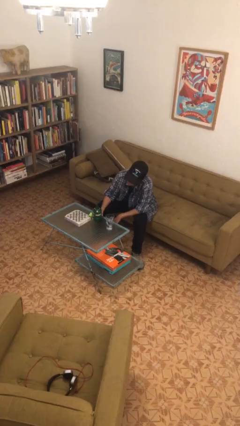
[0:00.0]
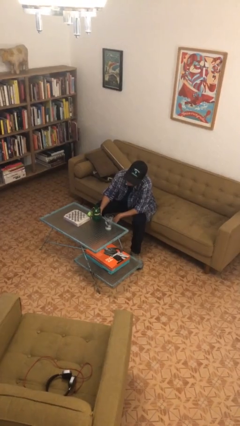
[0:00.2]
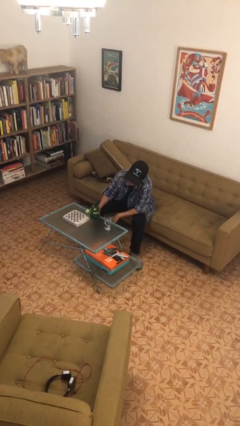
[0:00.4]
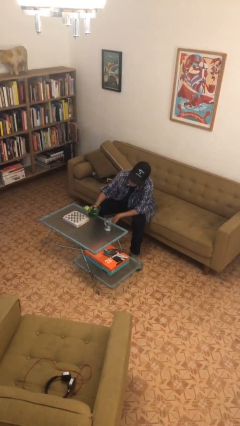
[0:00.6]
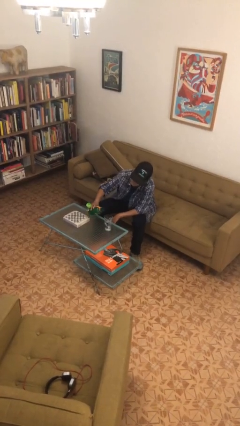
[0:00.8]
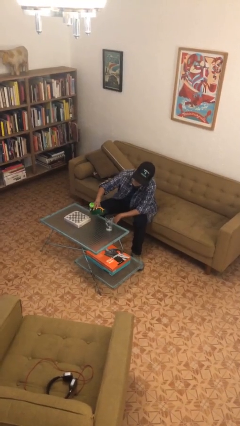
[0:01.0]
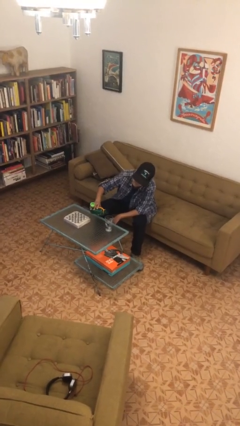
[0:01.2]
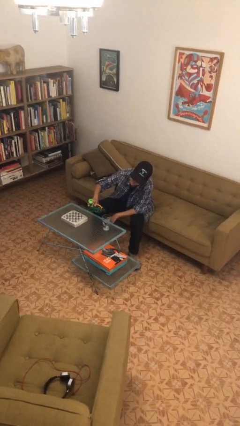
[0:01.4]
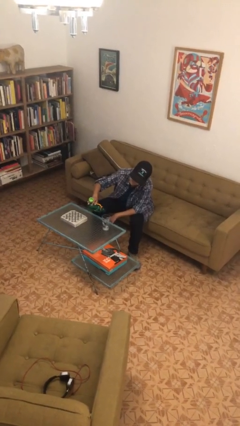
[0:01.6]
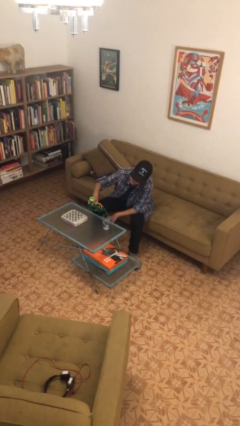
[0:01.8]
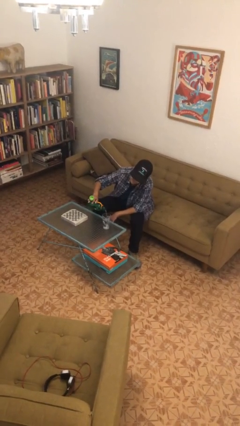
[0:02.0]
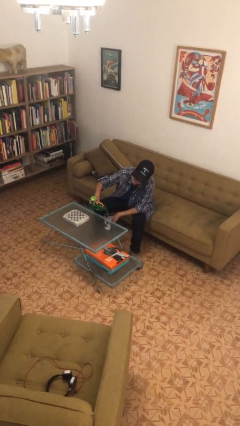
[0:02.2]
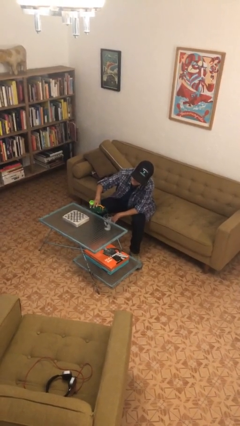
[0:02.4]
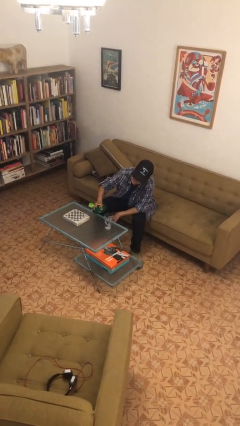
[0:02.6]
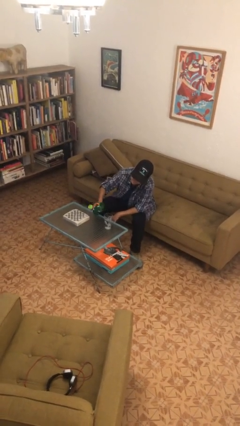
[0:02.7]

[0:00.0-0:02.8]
person pours liquid into cup

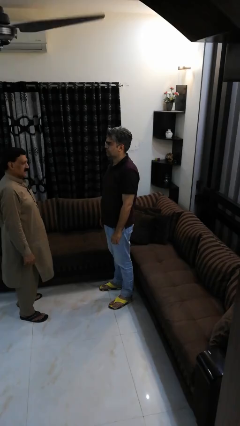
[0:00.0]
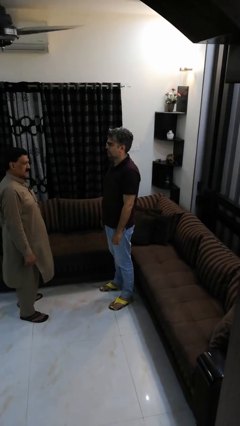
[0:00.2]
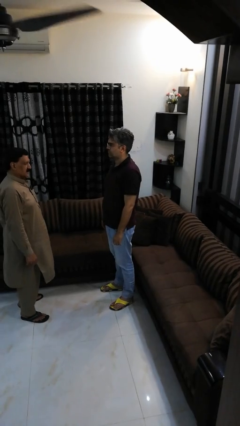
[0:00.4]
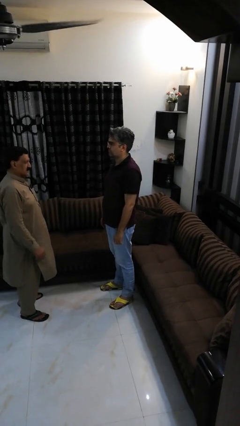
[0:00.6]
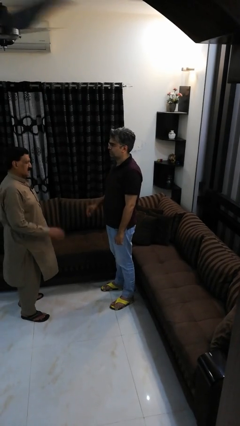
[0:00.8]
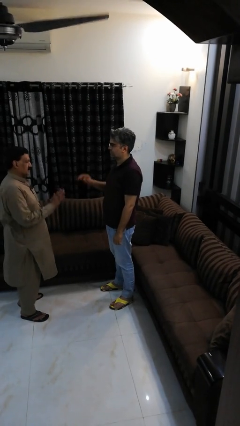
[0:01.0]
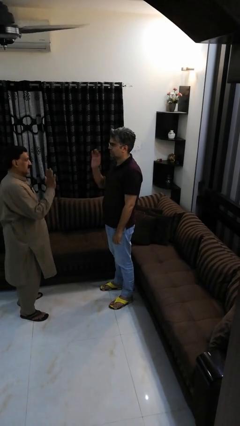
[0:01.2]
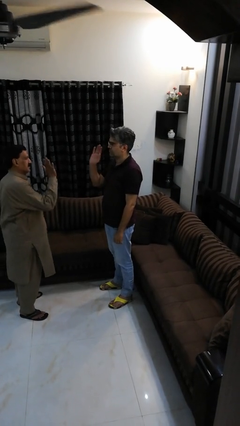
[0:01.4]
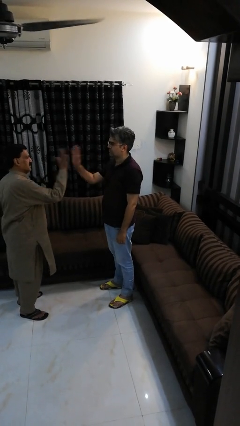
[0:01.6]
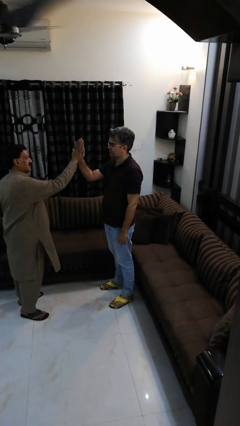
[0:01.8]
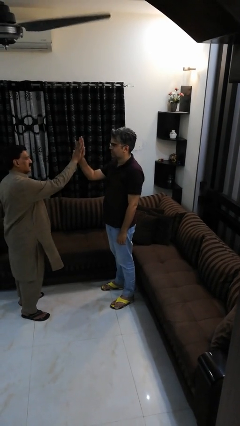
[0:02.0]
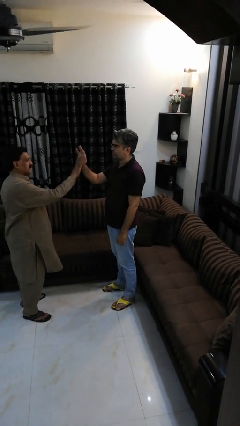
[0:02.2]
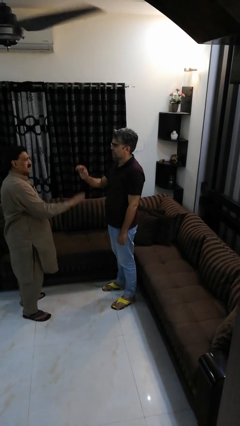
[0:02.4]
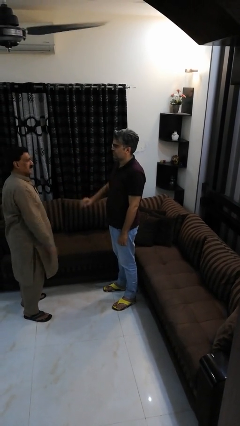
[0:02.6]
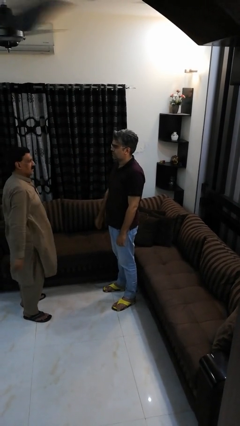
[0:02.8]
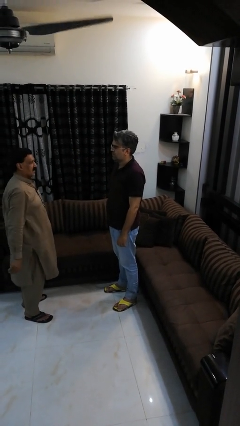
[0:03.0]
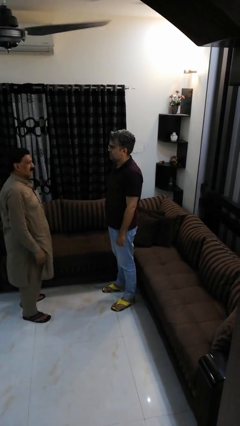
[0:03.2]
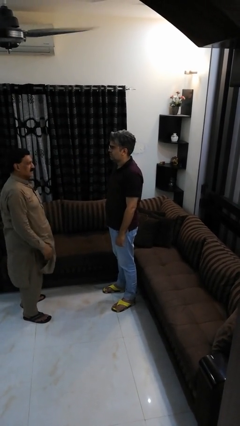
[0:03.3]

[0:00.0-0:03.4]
person highfives hand

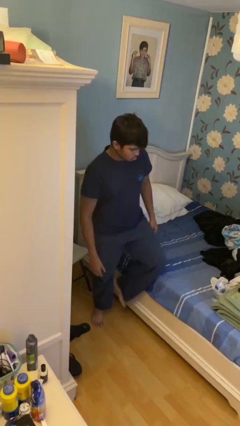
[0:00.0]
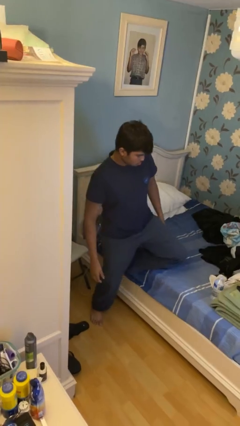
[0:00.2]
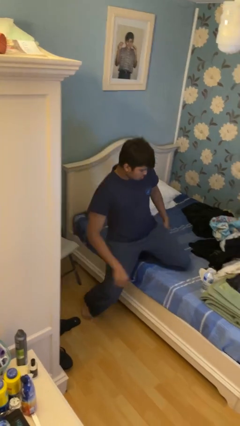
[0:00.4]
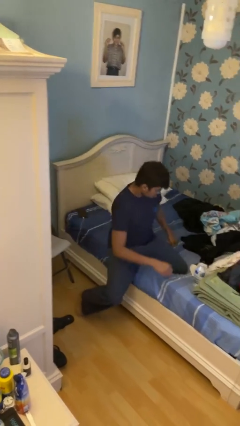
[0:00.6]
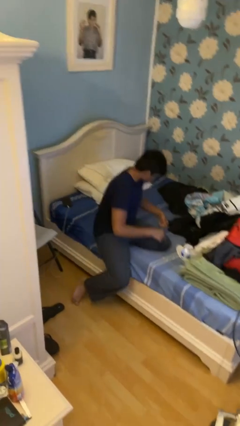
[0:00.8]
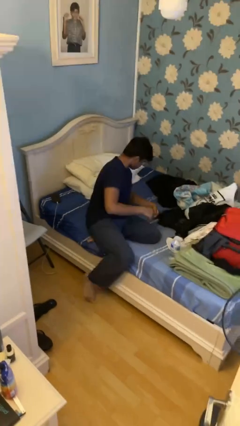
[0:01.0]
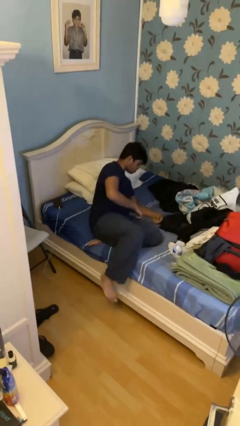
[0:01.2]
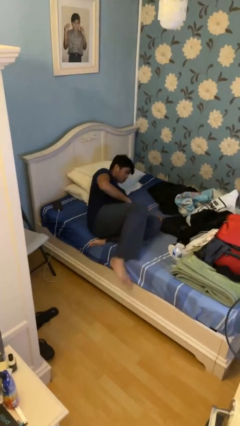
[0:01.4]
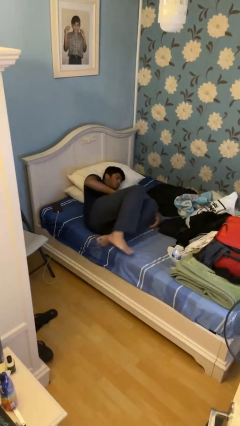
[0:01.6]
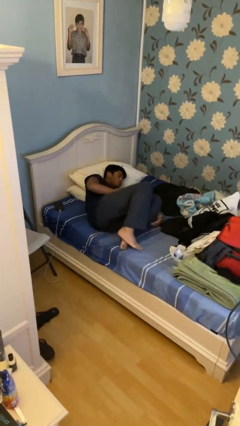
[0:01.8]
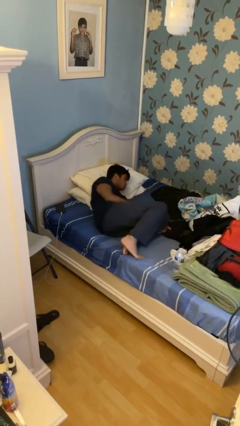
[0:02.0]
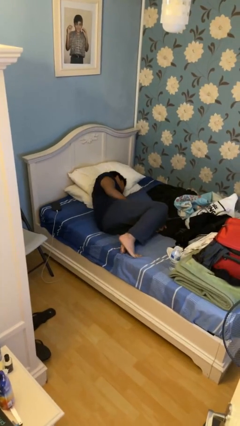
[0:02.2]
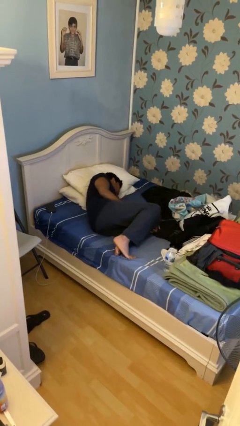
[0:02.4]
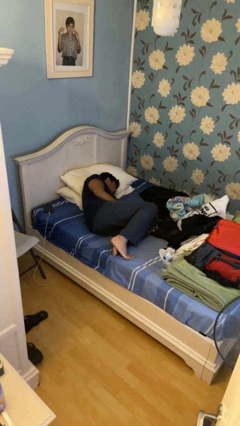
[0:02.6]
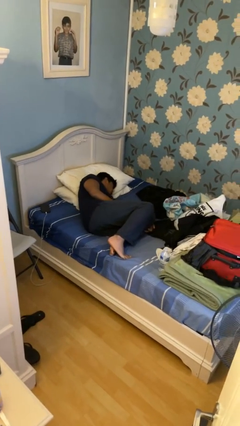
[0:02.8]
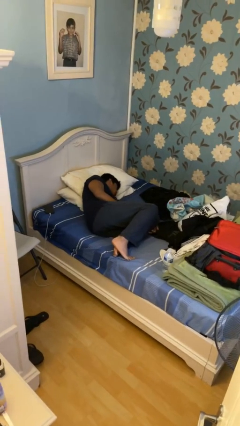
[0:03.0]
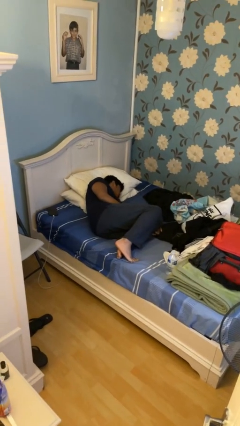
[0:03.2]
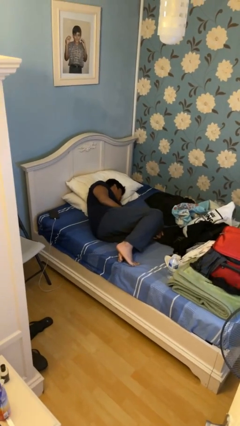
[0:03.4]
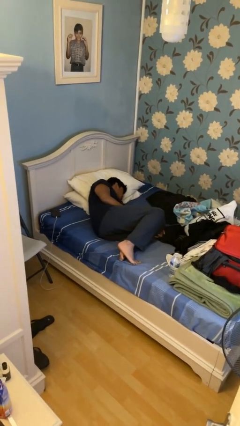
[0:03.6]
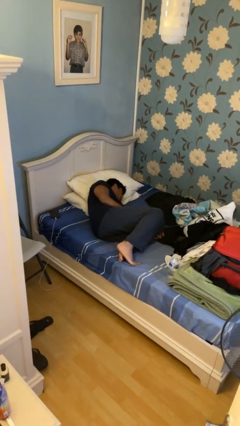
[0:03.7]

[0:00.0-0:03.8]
person lies down on bed

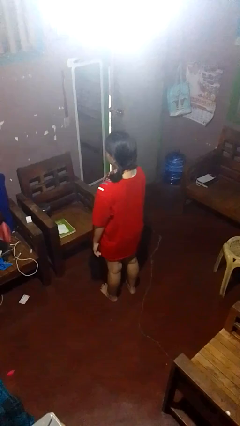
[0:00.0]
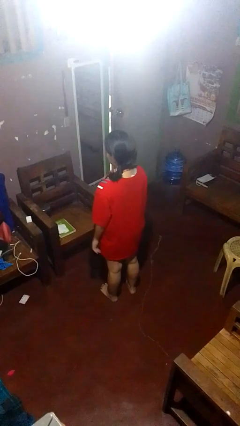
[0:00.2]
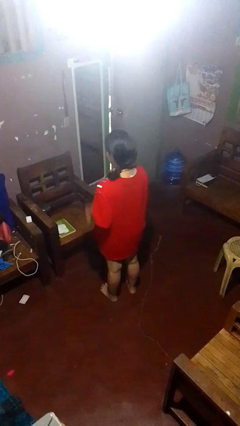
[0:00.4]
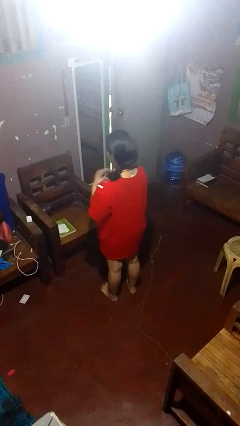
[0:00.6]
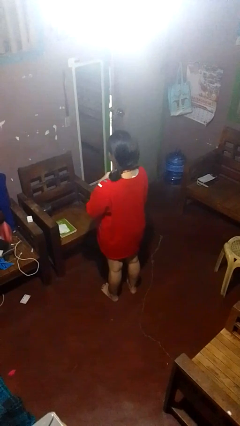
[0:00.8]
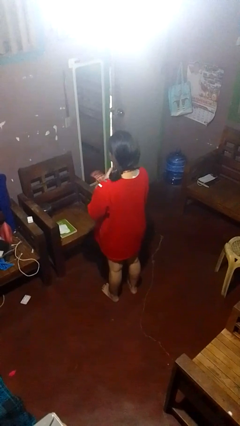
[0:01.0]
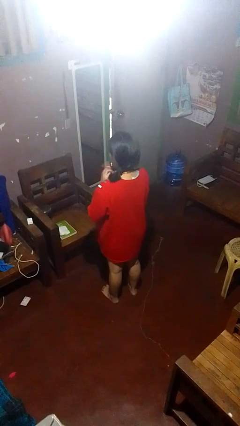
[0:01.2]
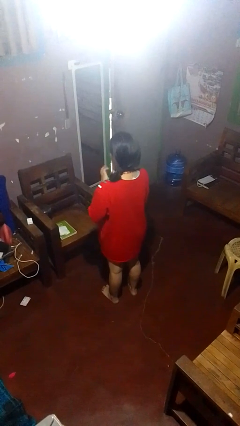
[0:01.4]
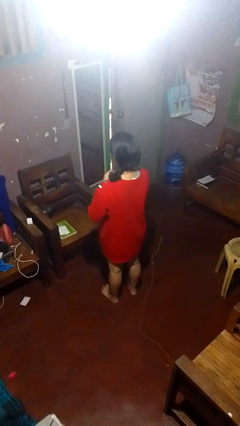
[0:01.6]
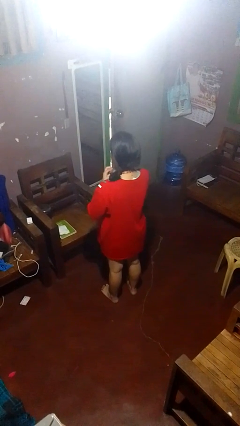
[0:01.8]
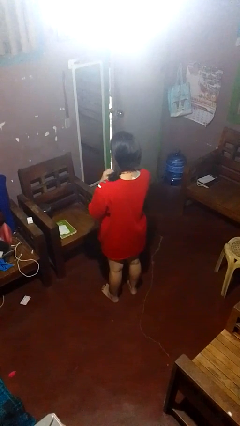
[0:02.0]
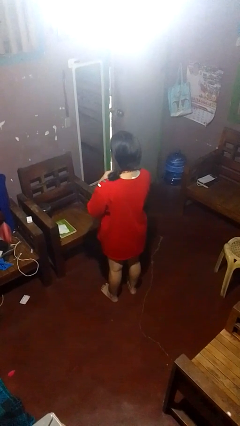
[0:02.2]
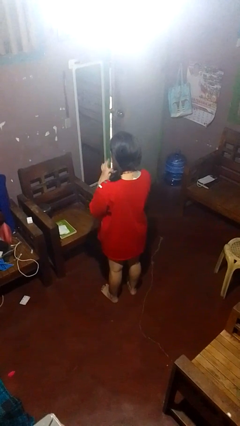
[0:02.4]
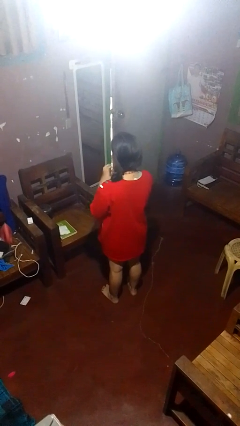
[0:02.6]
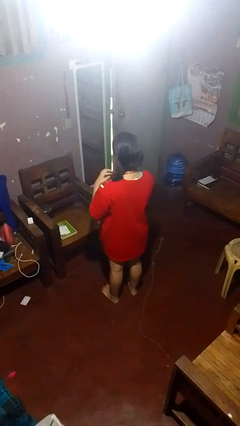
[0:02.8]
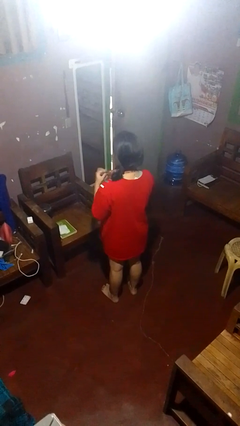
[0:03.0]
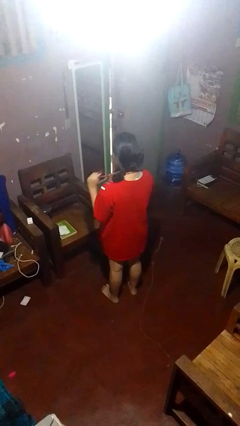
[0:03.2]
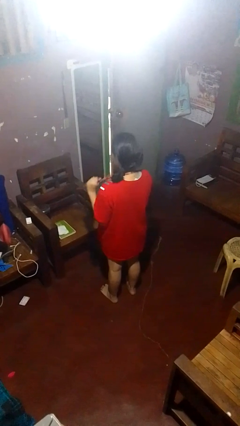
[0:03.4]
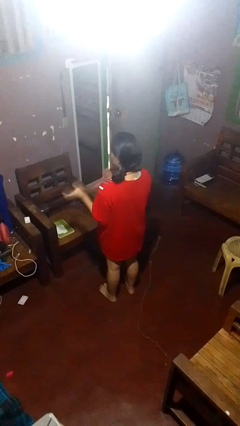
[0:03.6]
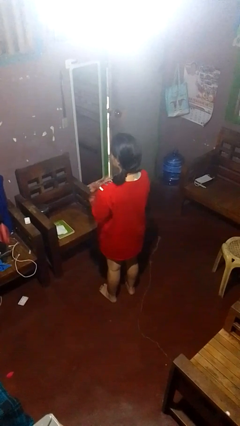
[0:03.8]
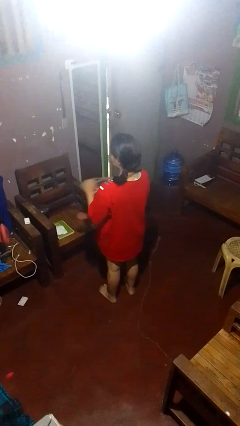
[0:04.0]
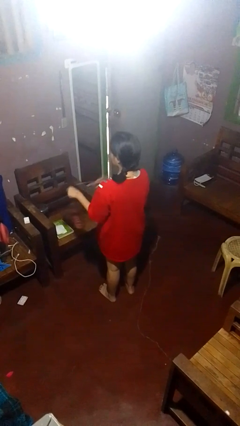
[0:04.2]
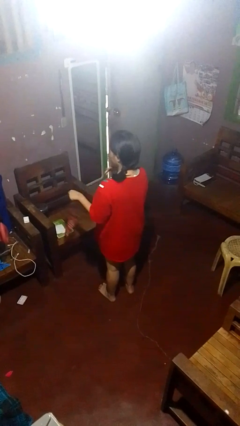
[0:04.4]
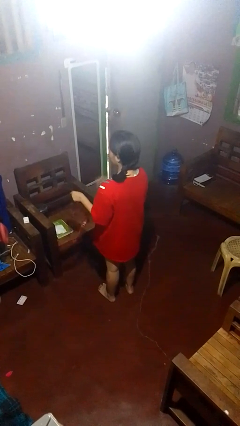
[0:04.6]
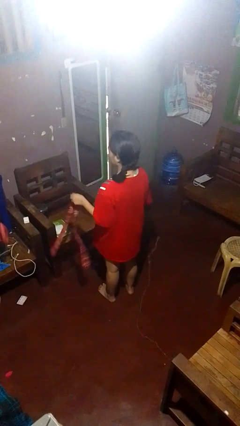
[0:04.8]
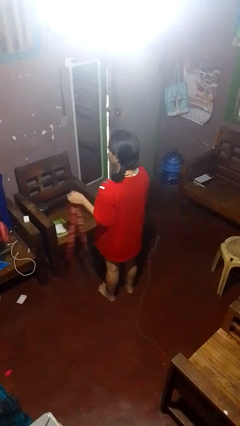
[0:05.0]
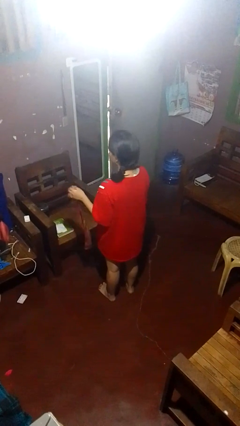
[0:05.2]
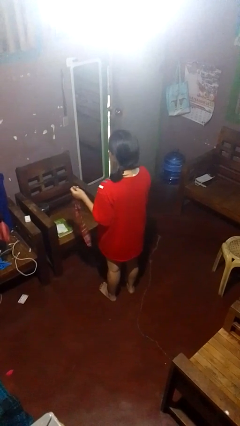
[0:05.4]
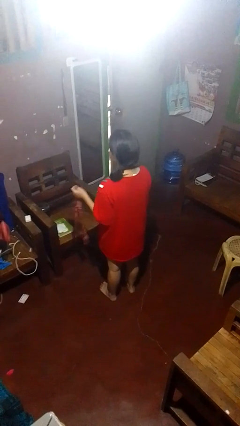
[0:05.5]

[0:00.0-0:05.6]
person takes off necktie

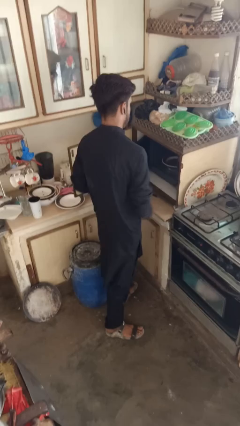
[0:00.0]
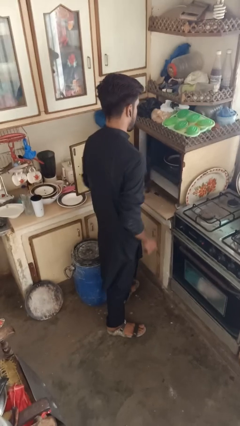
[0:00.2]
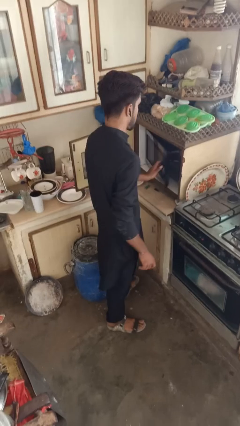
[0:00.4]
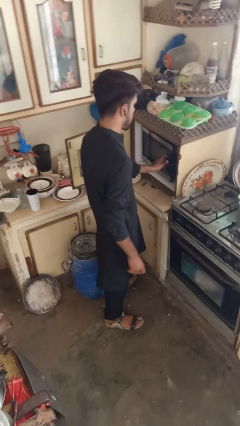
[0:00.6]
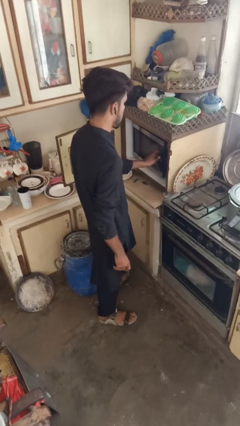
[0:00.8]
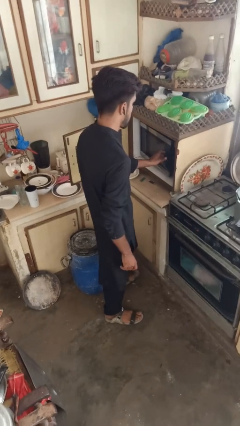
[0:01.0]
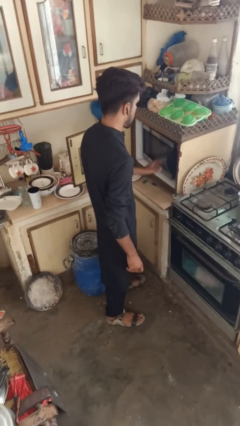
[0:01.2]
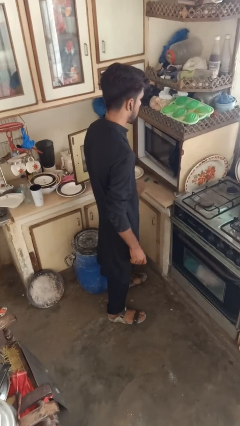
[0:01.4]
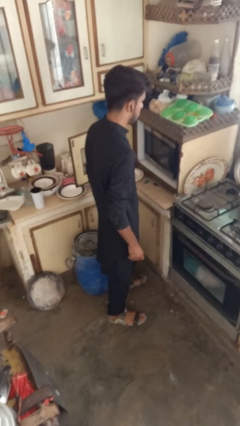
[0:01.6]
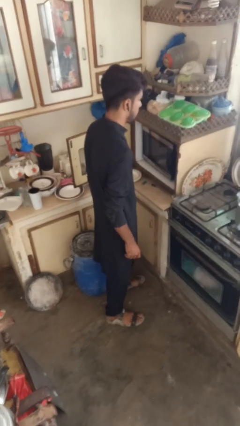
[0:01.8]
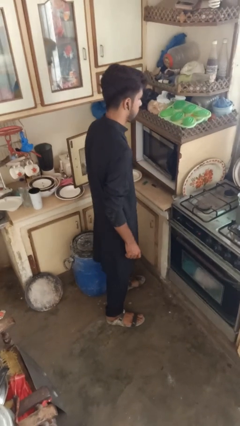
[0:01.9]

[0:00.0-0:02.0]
person closes microwave
